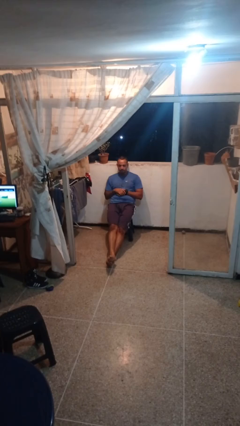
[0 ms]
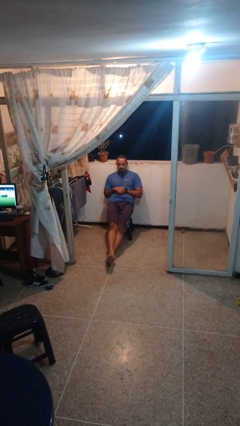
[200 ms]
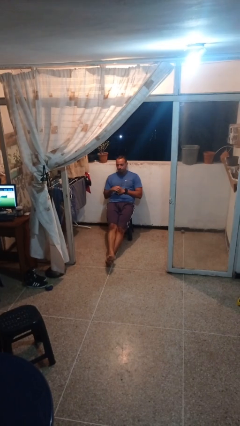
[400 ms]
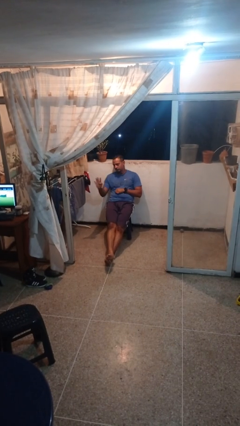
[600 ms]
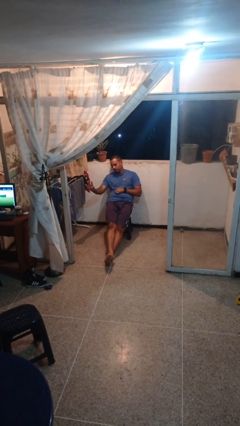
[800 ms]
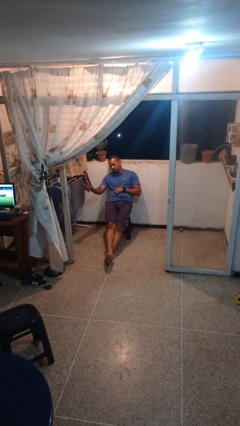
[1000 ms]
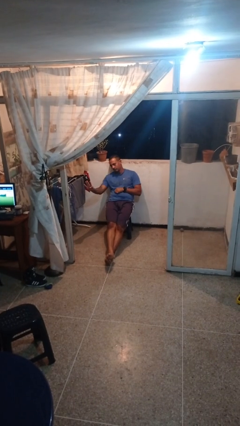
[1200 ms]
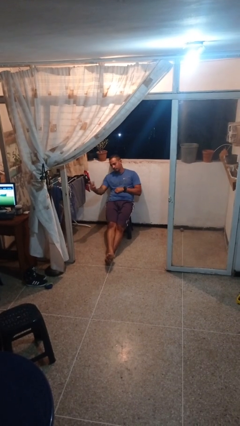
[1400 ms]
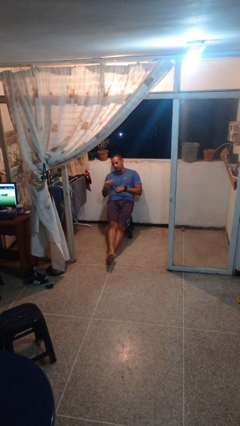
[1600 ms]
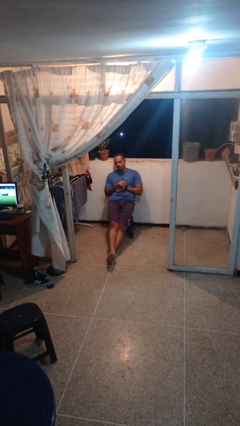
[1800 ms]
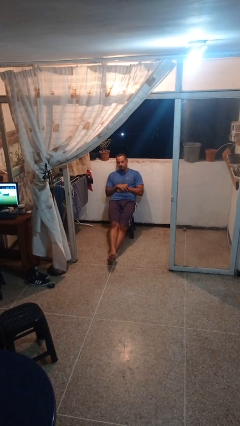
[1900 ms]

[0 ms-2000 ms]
person gestures number four

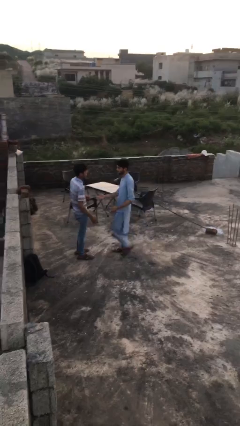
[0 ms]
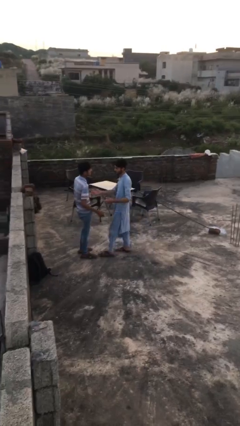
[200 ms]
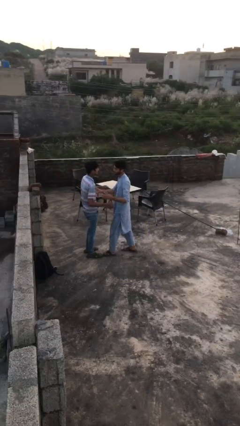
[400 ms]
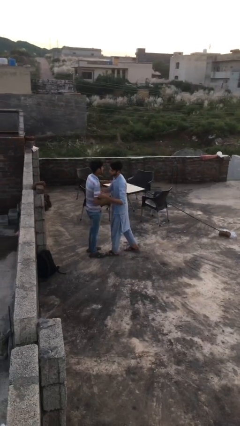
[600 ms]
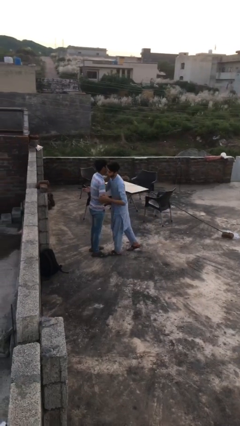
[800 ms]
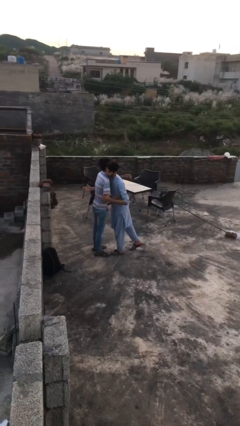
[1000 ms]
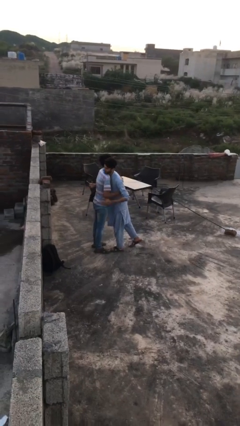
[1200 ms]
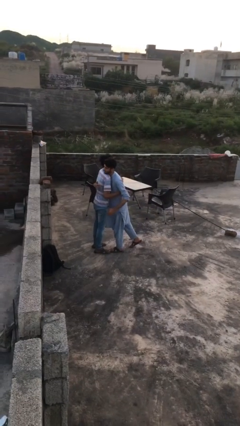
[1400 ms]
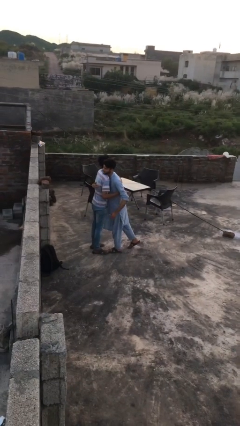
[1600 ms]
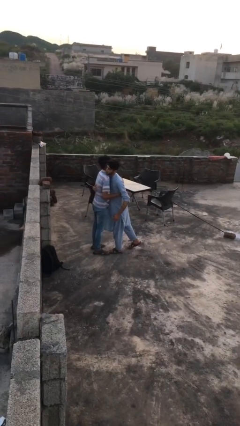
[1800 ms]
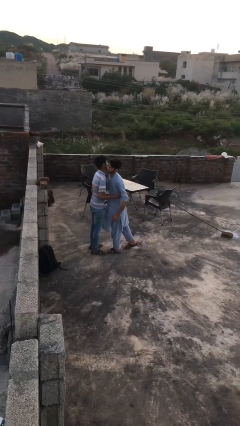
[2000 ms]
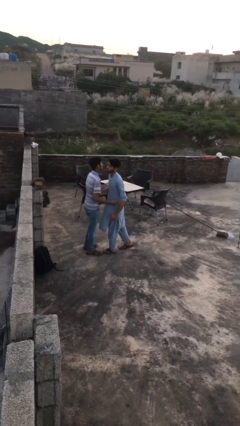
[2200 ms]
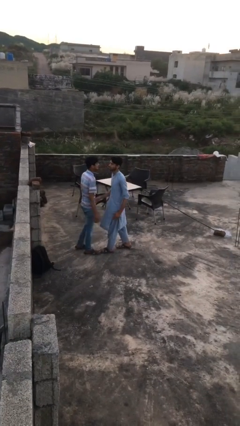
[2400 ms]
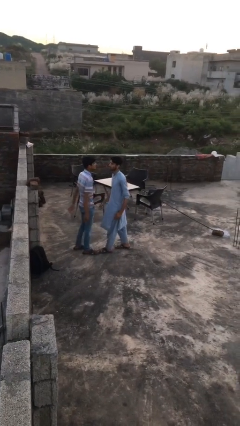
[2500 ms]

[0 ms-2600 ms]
person embraces person

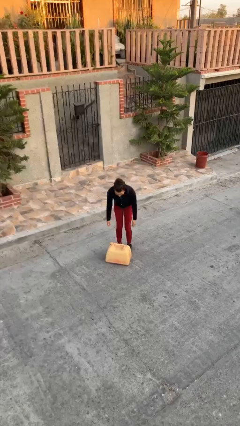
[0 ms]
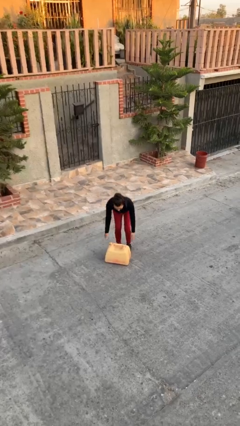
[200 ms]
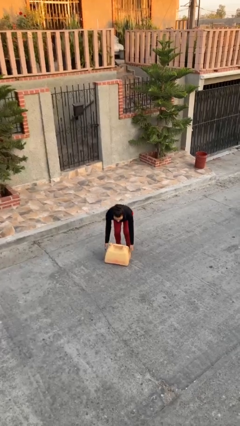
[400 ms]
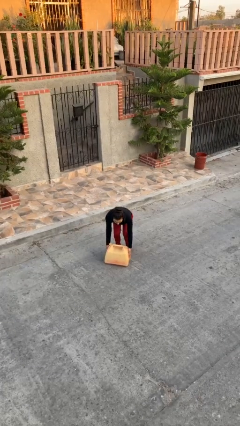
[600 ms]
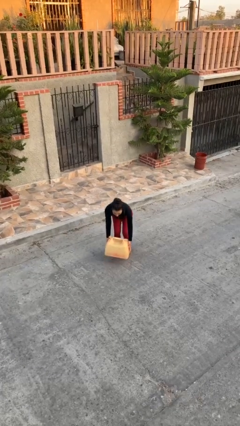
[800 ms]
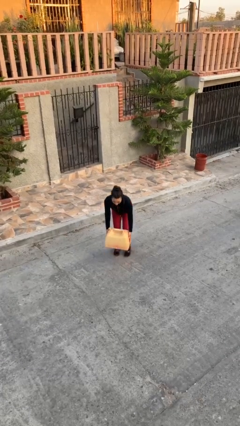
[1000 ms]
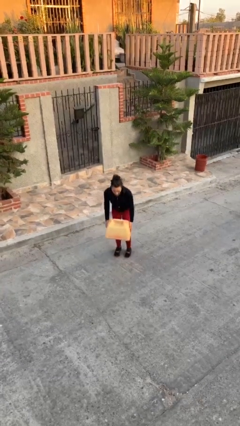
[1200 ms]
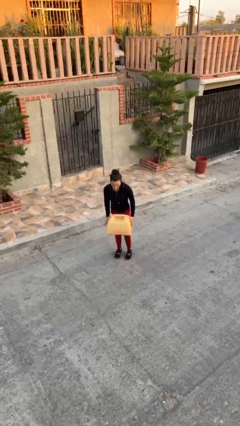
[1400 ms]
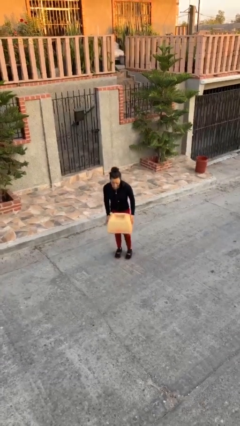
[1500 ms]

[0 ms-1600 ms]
person picks up object from floor

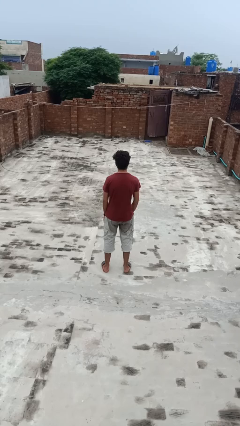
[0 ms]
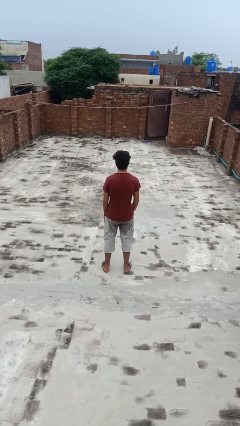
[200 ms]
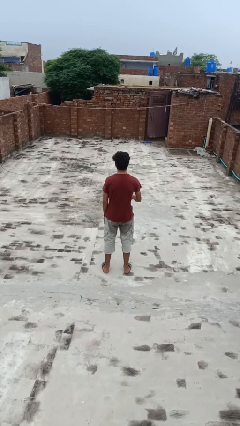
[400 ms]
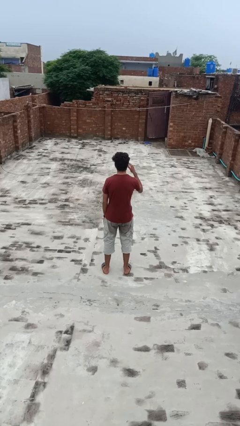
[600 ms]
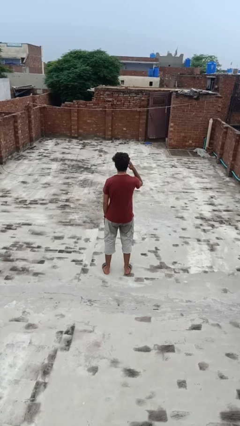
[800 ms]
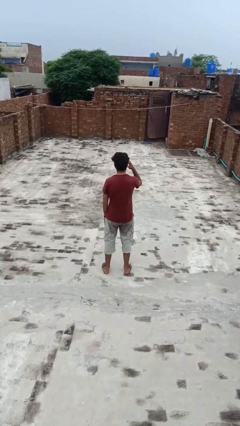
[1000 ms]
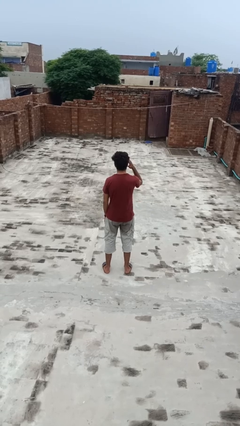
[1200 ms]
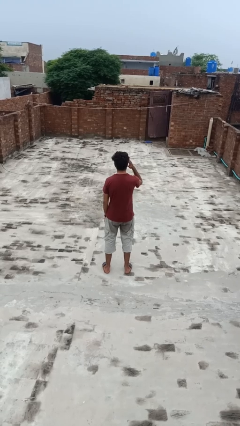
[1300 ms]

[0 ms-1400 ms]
person salutes

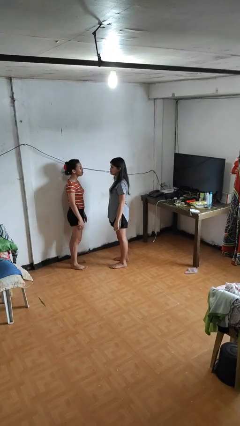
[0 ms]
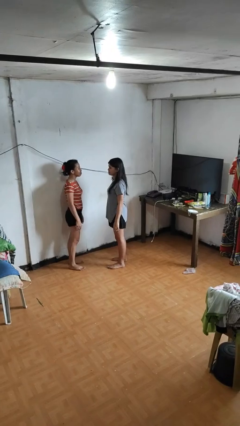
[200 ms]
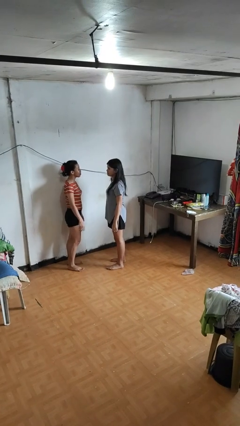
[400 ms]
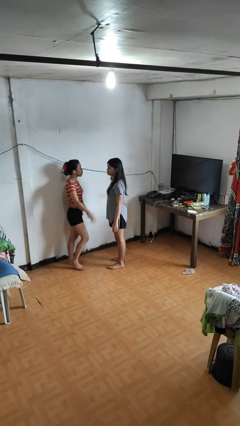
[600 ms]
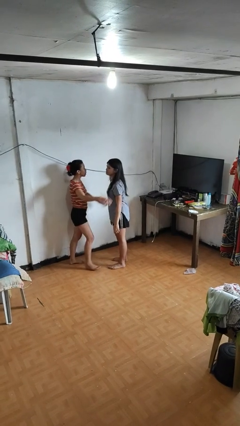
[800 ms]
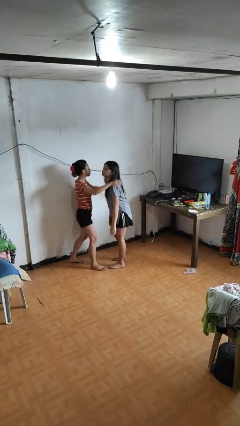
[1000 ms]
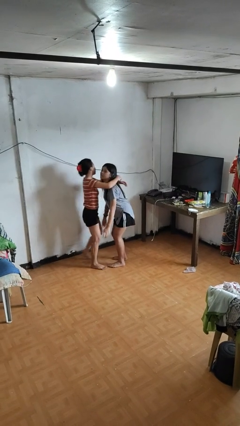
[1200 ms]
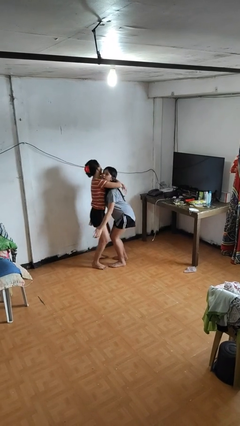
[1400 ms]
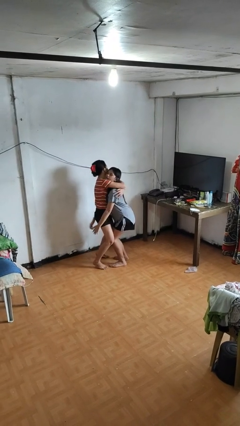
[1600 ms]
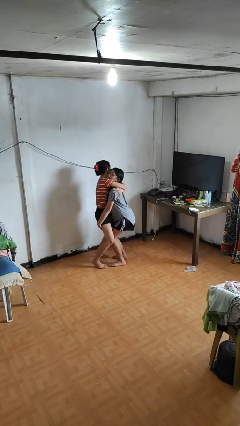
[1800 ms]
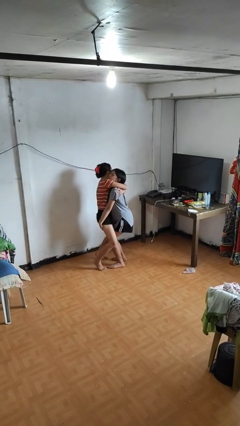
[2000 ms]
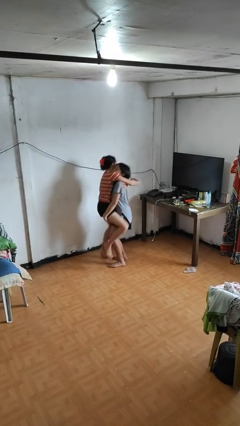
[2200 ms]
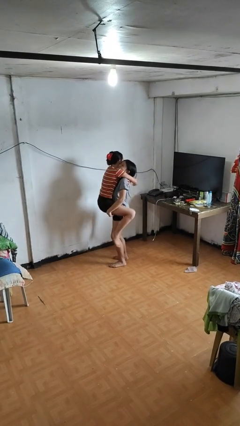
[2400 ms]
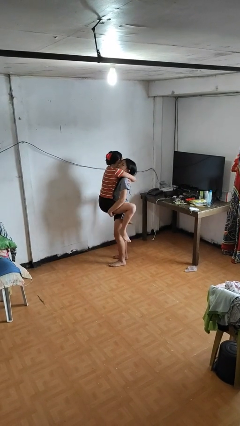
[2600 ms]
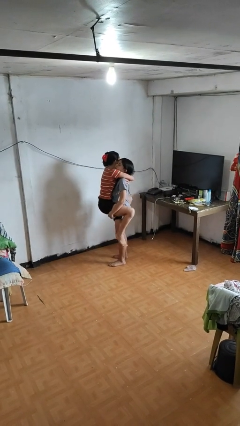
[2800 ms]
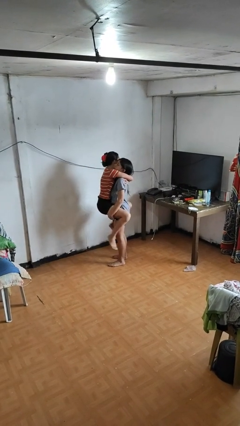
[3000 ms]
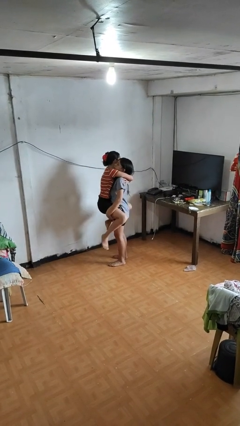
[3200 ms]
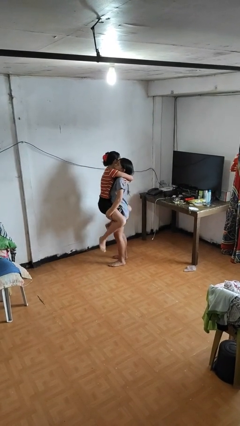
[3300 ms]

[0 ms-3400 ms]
person picks up person

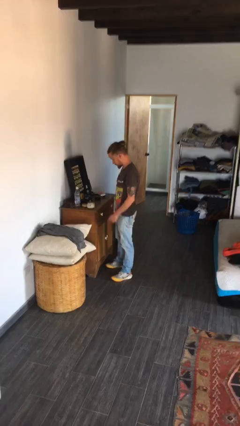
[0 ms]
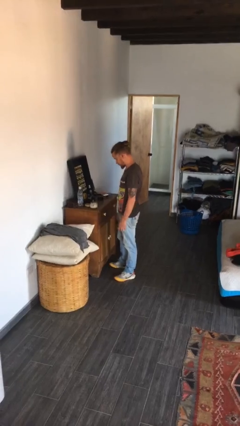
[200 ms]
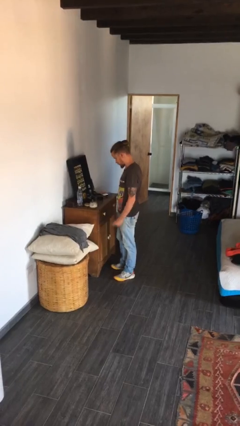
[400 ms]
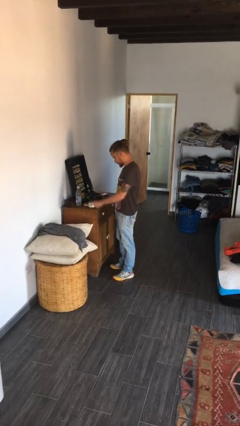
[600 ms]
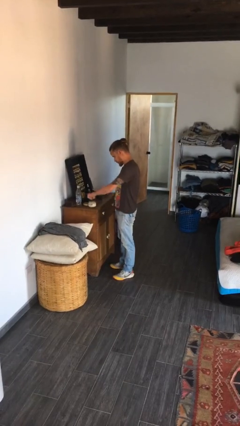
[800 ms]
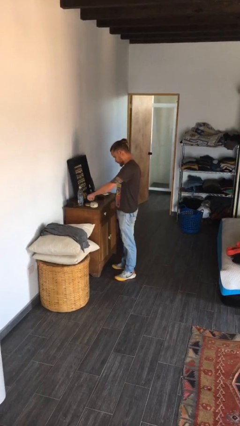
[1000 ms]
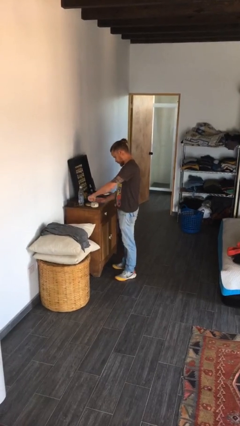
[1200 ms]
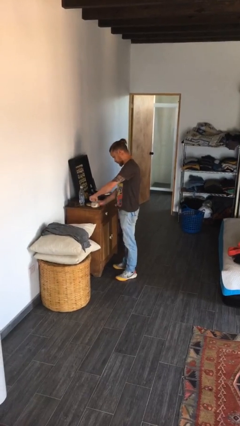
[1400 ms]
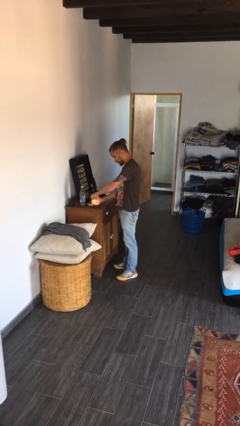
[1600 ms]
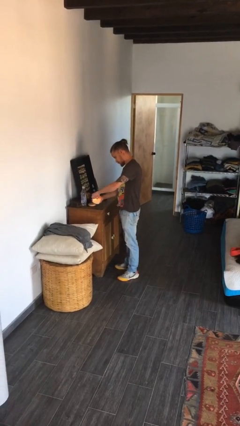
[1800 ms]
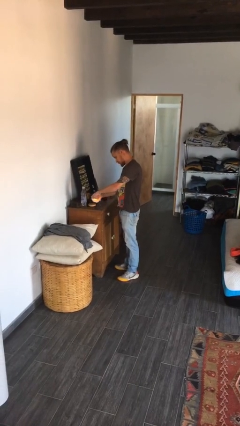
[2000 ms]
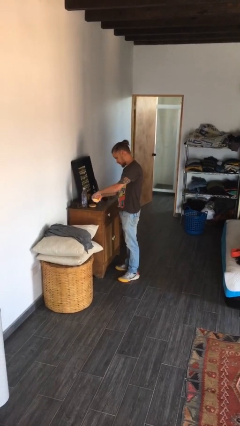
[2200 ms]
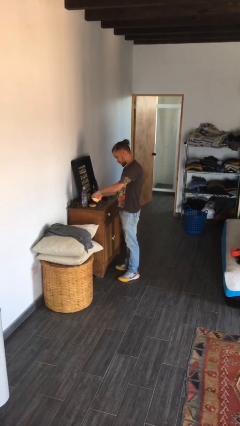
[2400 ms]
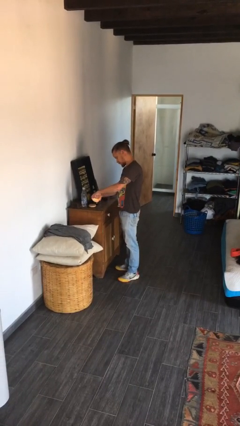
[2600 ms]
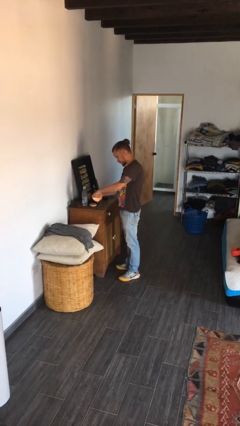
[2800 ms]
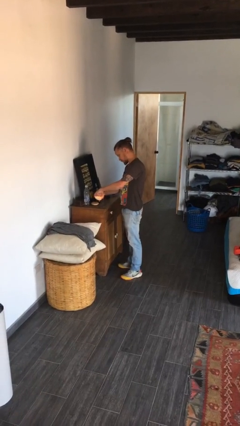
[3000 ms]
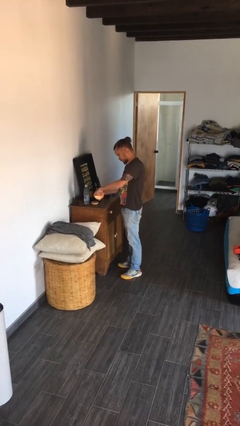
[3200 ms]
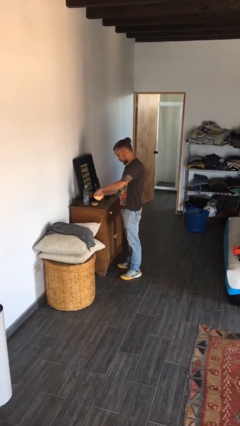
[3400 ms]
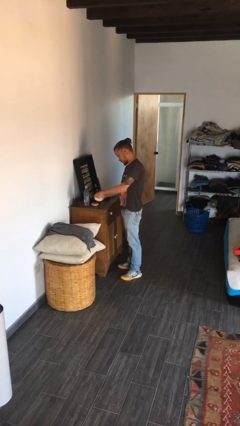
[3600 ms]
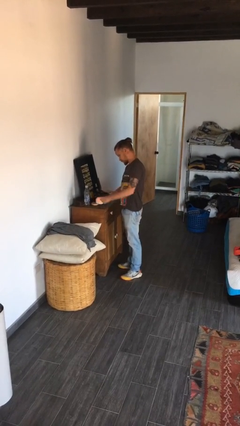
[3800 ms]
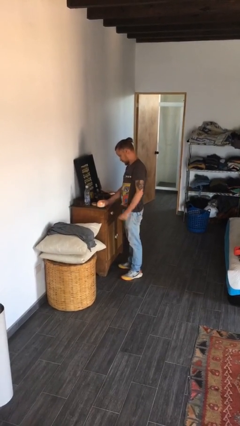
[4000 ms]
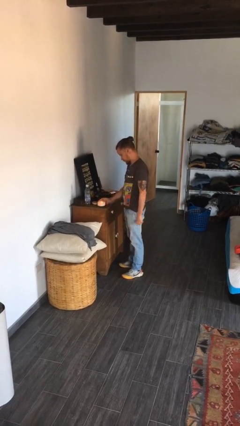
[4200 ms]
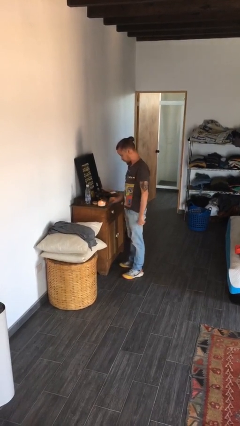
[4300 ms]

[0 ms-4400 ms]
person lights candle

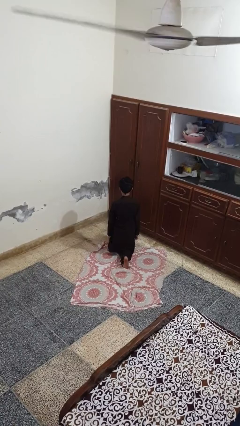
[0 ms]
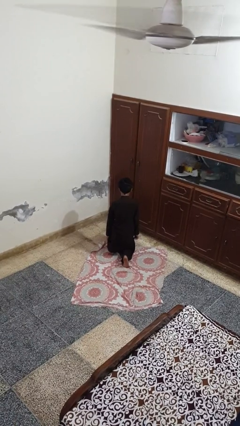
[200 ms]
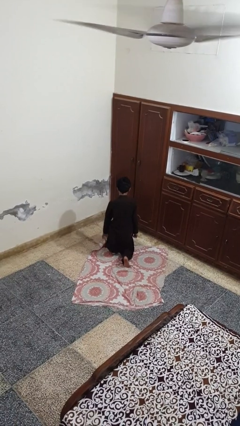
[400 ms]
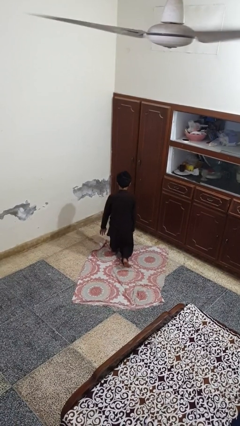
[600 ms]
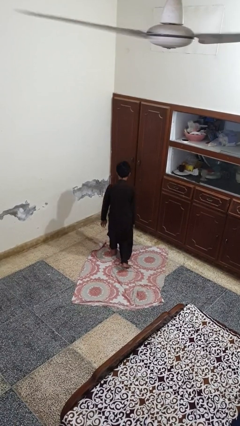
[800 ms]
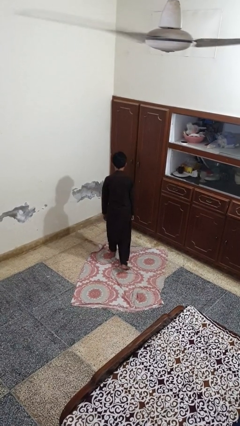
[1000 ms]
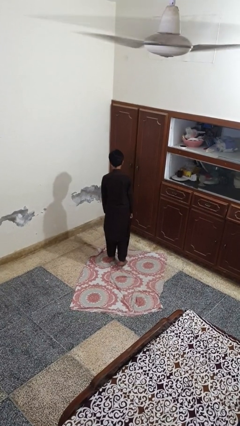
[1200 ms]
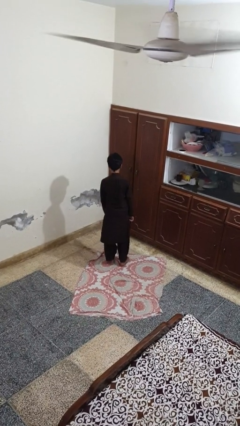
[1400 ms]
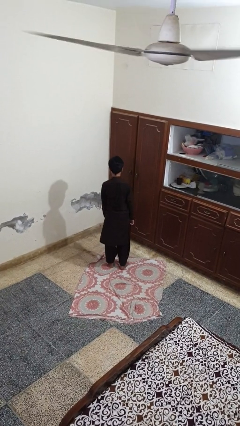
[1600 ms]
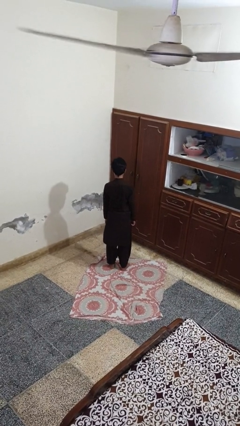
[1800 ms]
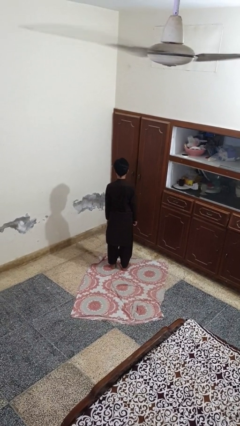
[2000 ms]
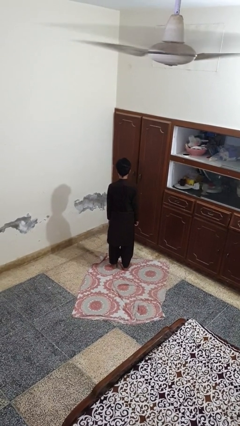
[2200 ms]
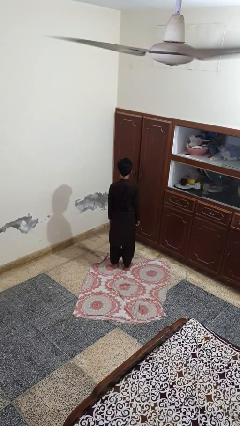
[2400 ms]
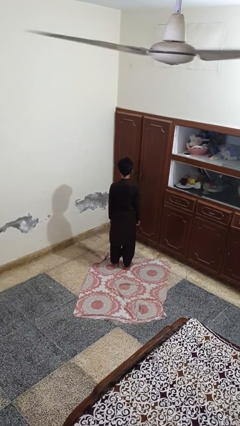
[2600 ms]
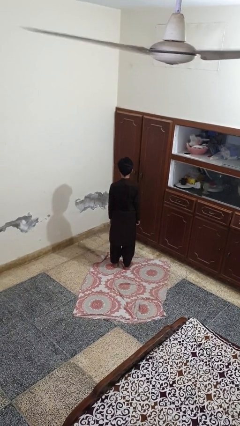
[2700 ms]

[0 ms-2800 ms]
person stands up from floor
